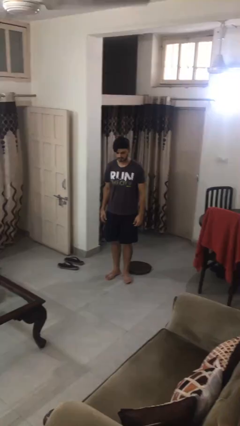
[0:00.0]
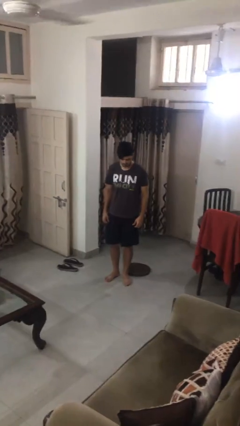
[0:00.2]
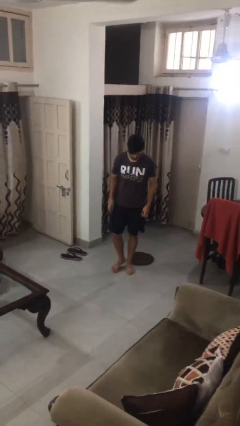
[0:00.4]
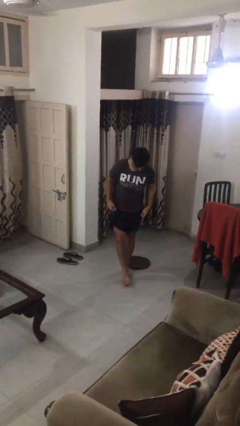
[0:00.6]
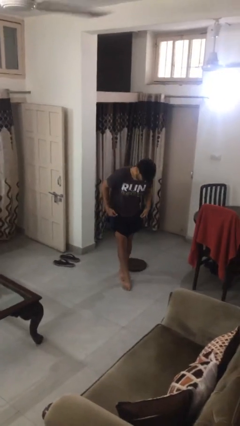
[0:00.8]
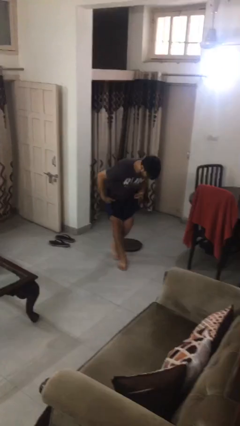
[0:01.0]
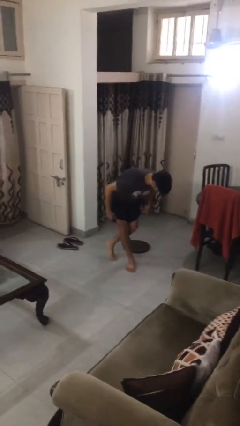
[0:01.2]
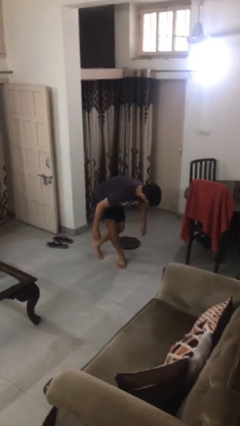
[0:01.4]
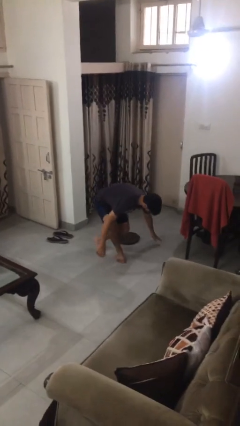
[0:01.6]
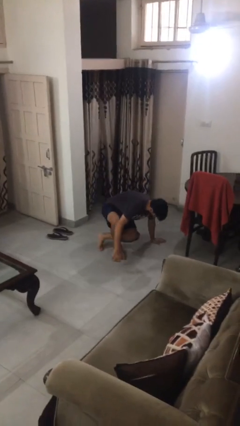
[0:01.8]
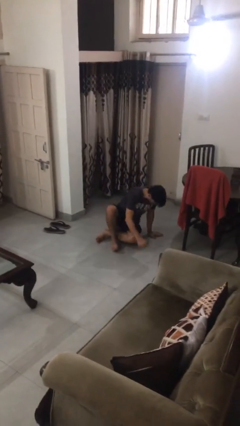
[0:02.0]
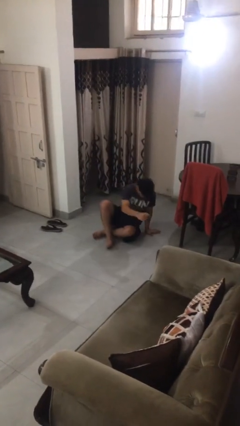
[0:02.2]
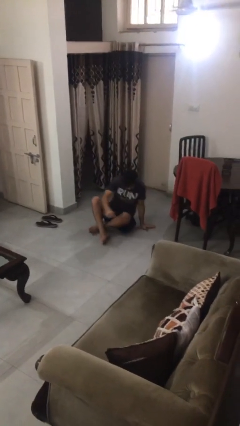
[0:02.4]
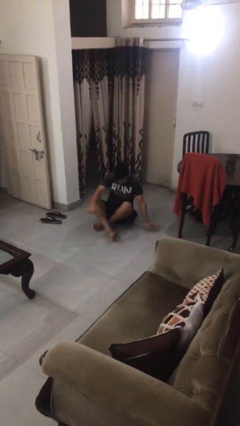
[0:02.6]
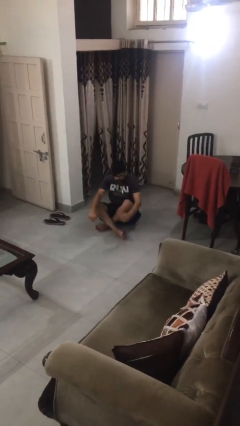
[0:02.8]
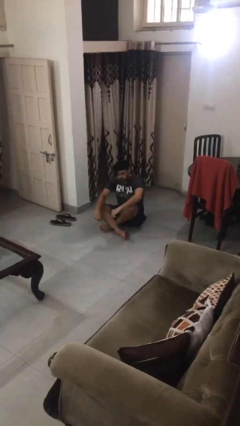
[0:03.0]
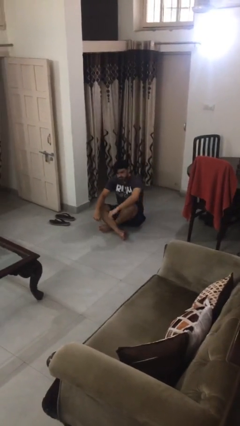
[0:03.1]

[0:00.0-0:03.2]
person sits crisscross

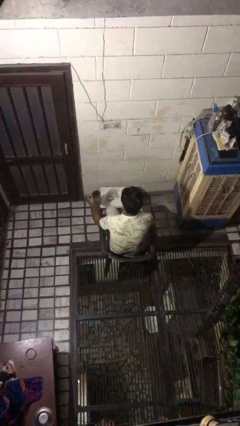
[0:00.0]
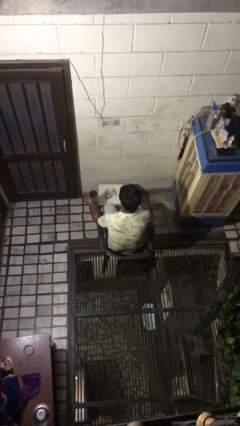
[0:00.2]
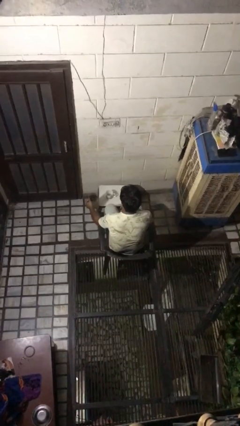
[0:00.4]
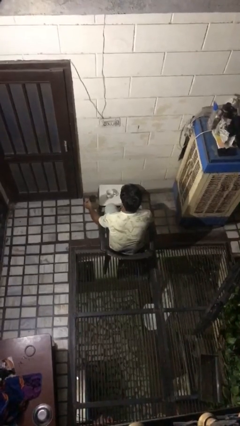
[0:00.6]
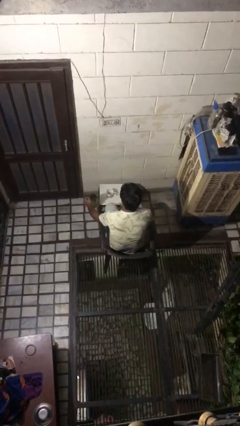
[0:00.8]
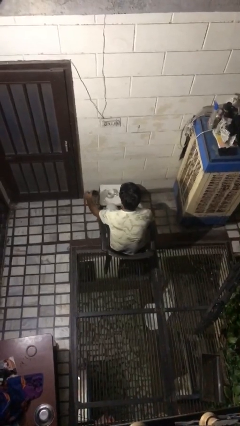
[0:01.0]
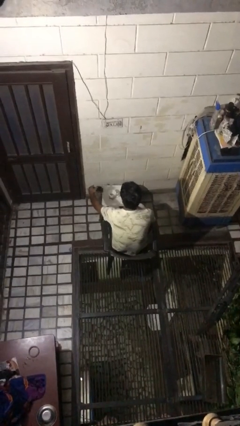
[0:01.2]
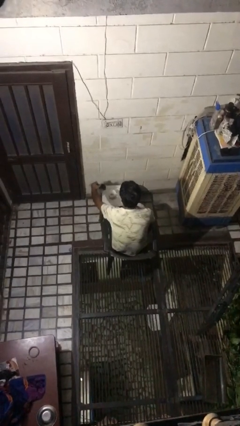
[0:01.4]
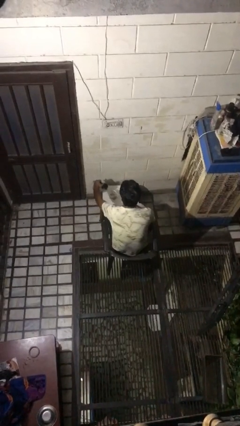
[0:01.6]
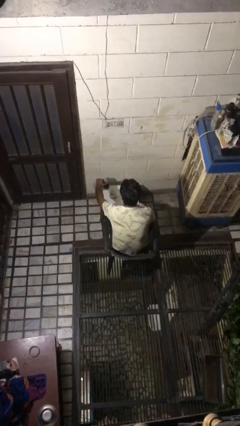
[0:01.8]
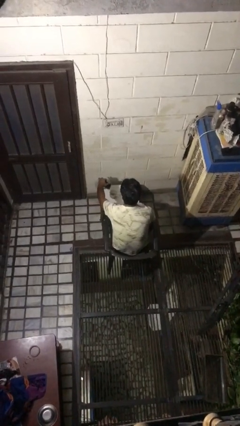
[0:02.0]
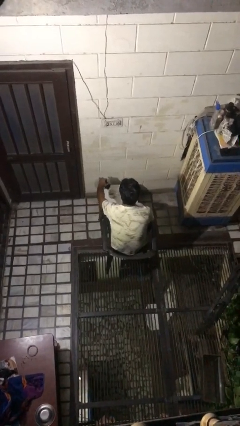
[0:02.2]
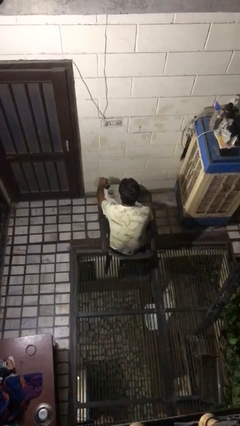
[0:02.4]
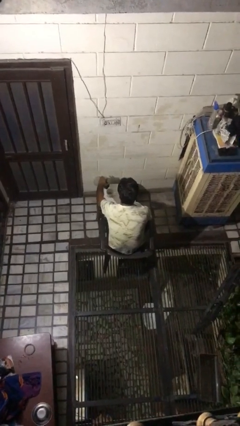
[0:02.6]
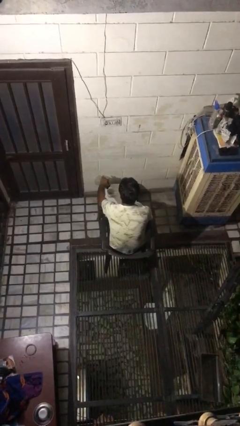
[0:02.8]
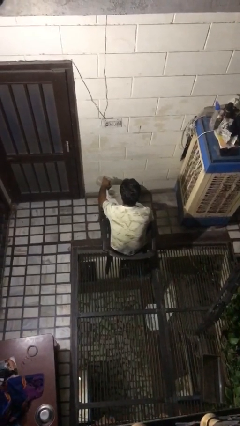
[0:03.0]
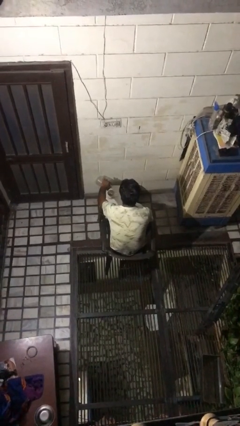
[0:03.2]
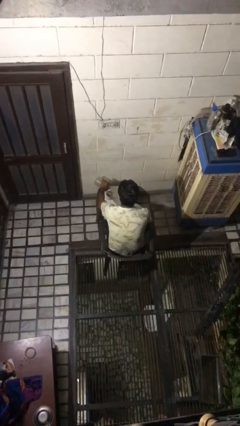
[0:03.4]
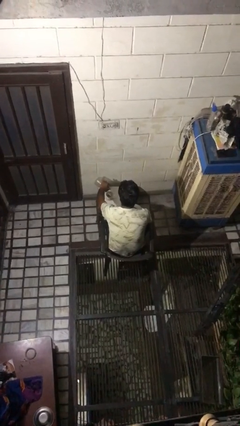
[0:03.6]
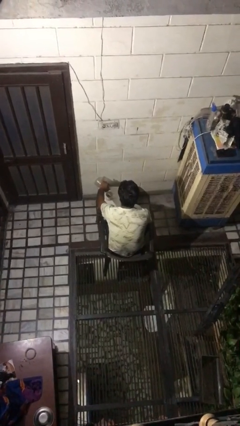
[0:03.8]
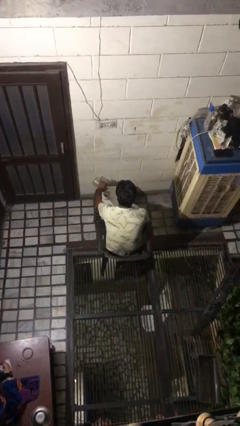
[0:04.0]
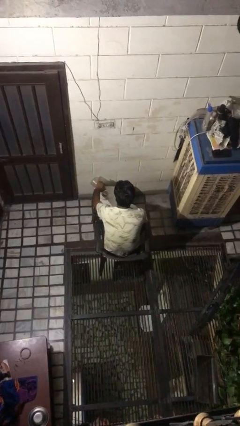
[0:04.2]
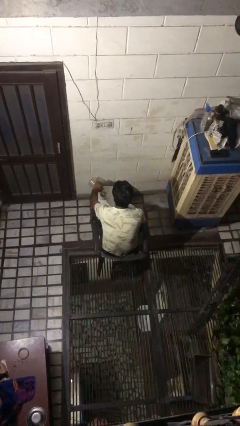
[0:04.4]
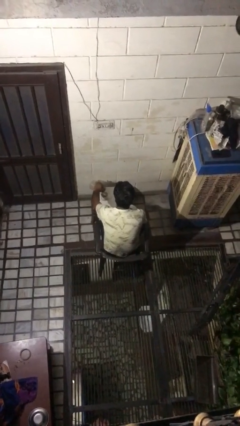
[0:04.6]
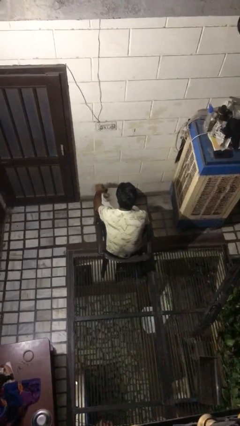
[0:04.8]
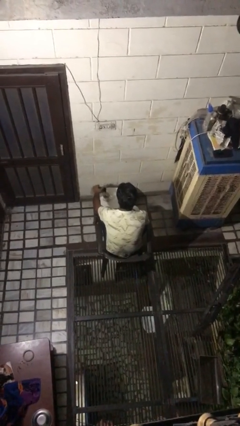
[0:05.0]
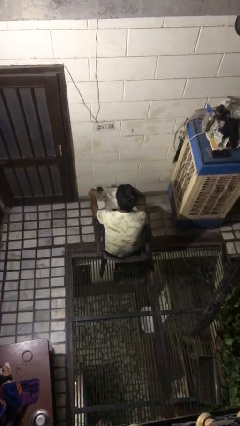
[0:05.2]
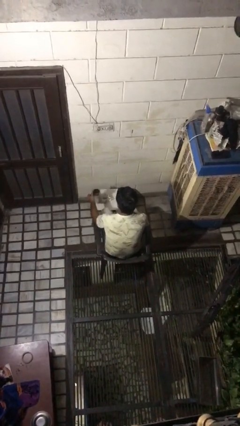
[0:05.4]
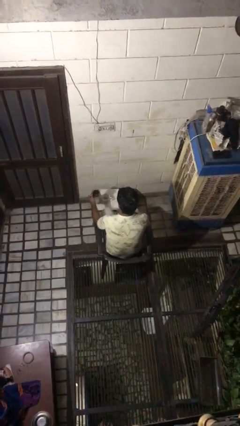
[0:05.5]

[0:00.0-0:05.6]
person pours coffee into mug

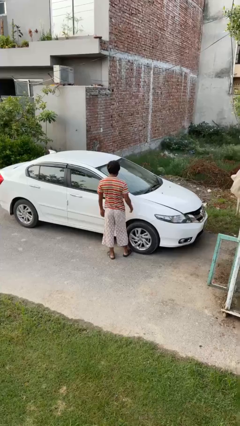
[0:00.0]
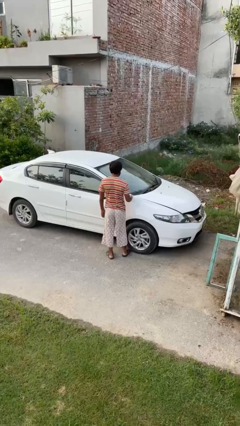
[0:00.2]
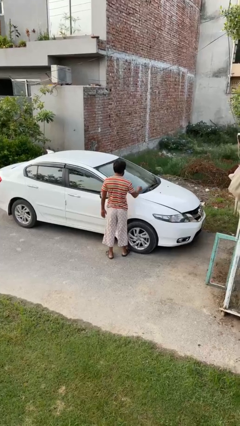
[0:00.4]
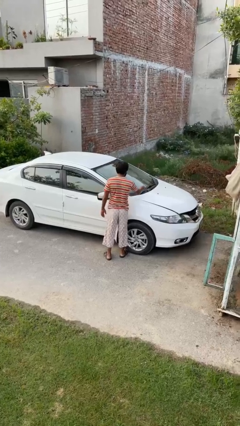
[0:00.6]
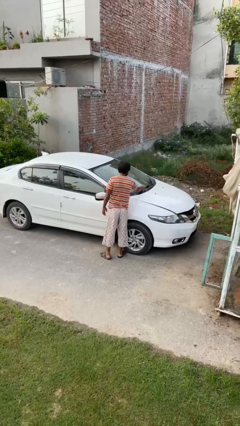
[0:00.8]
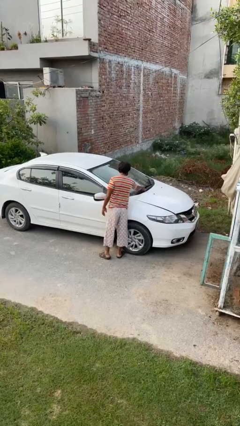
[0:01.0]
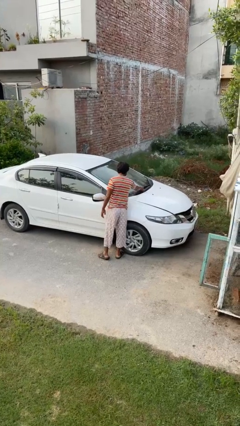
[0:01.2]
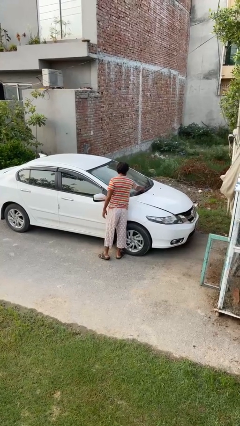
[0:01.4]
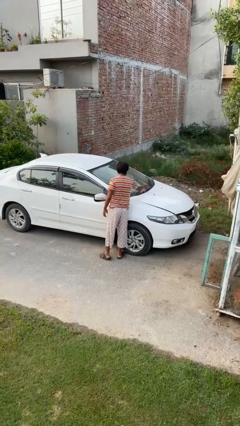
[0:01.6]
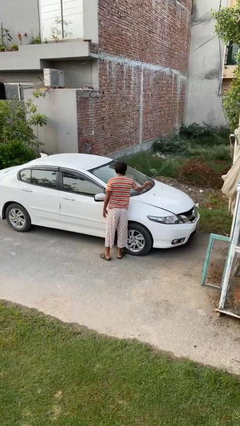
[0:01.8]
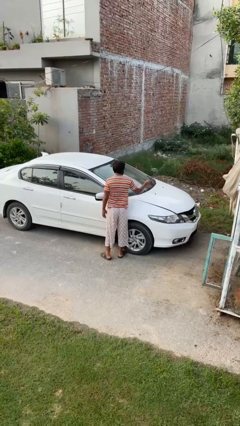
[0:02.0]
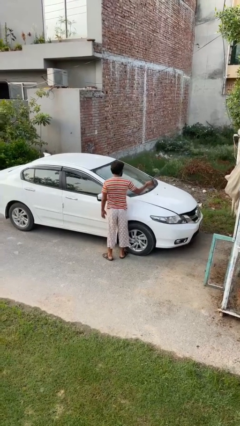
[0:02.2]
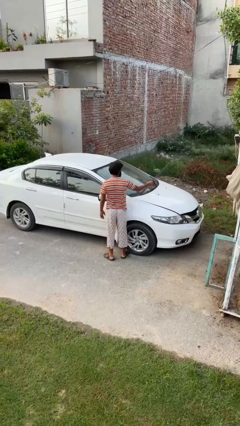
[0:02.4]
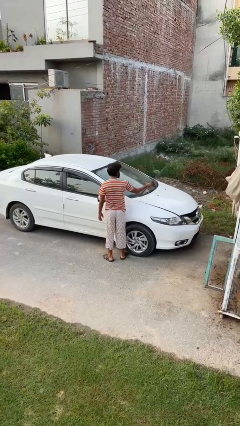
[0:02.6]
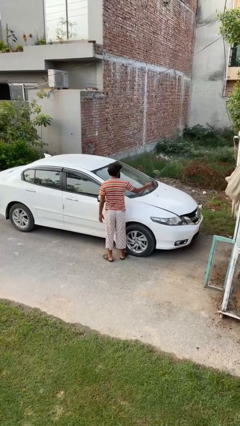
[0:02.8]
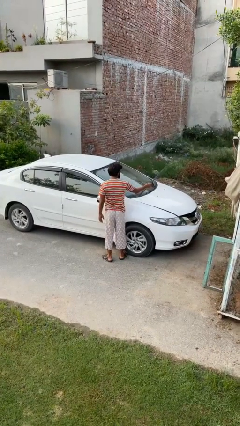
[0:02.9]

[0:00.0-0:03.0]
person flips up car wipers

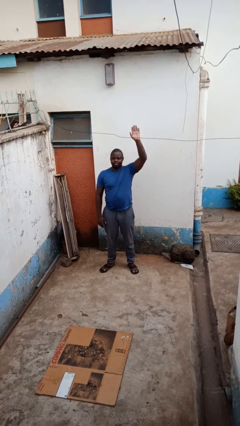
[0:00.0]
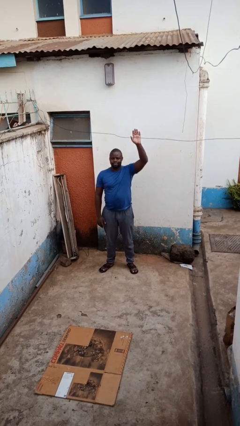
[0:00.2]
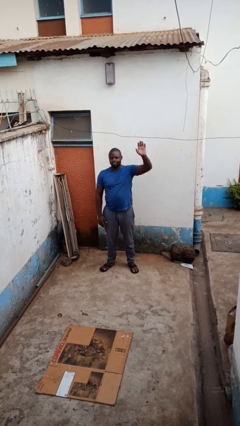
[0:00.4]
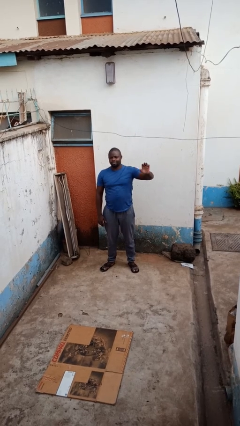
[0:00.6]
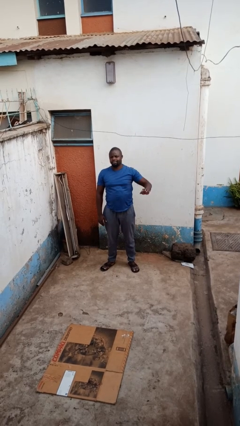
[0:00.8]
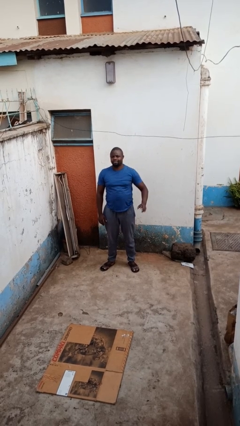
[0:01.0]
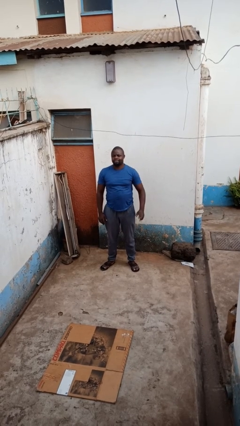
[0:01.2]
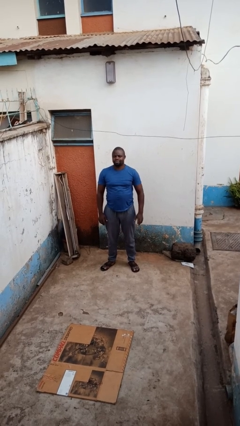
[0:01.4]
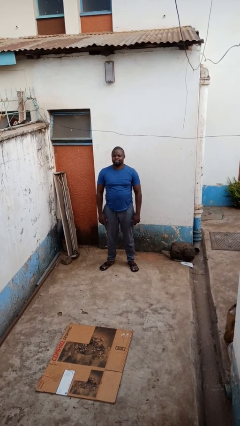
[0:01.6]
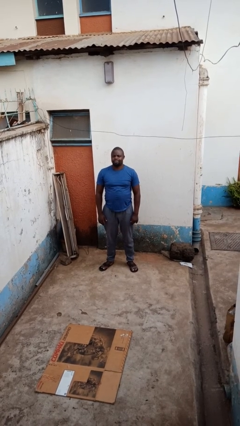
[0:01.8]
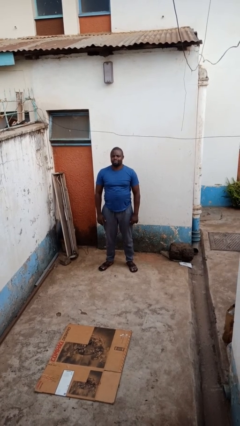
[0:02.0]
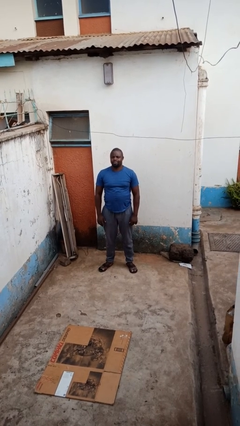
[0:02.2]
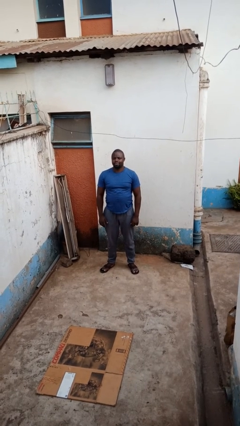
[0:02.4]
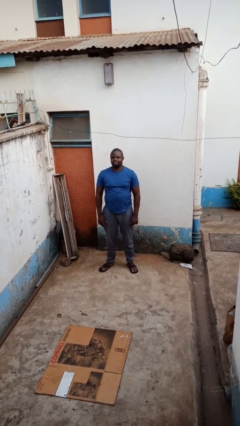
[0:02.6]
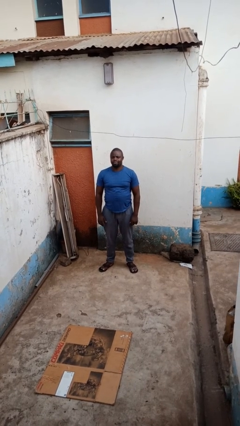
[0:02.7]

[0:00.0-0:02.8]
person gestures lower hand

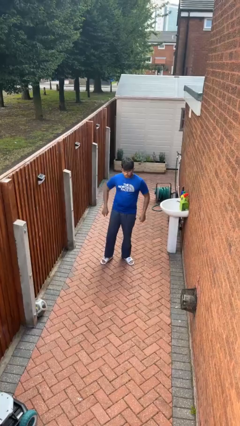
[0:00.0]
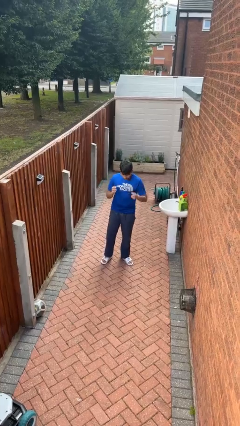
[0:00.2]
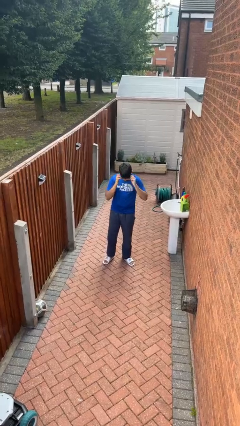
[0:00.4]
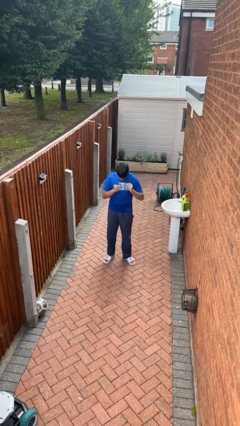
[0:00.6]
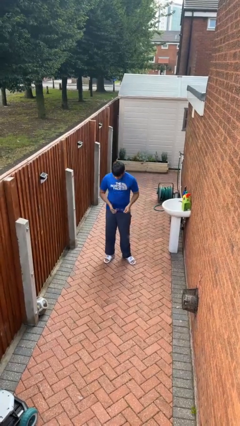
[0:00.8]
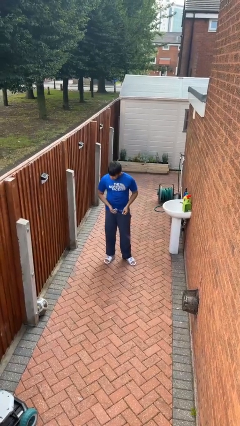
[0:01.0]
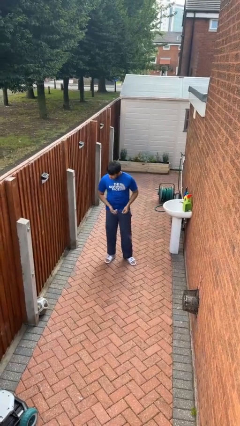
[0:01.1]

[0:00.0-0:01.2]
person takes off glasses

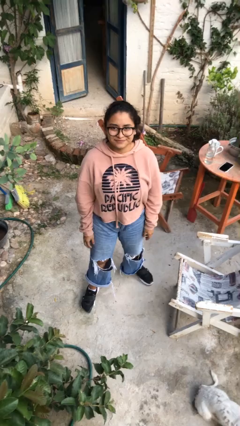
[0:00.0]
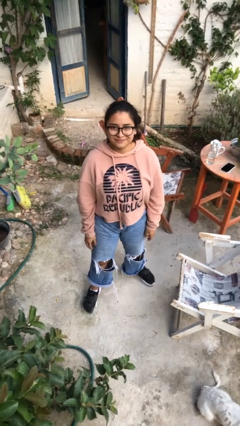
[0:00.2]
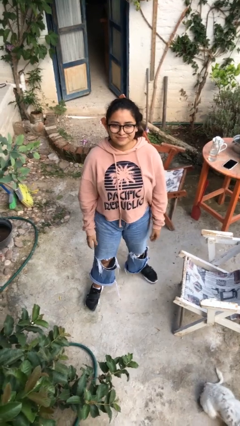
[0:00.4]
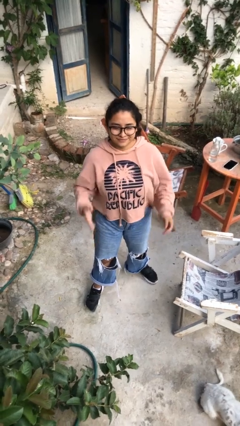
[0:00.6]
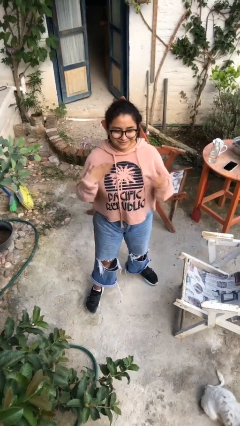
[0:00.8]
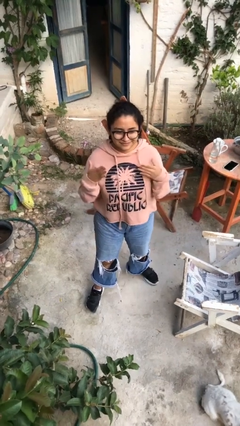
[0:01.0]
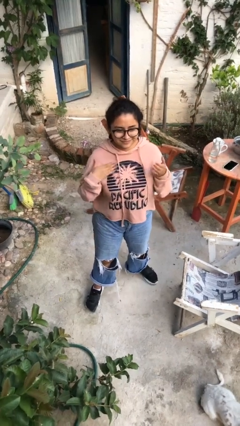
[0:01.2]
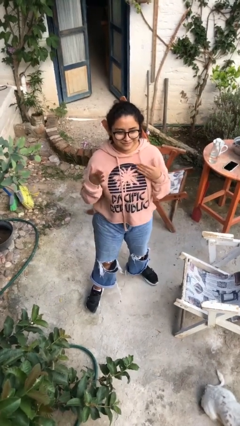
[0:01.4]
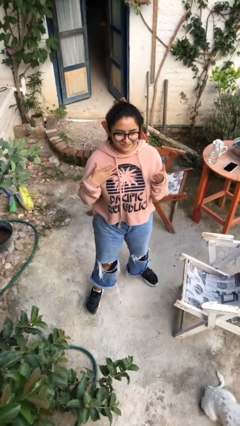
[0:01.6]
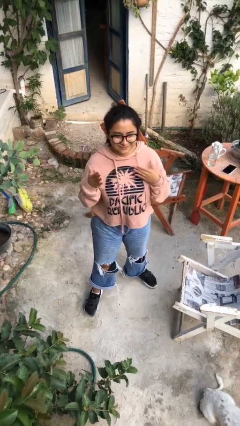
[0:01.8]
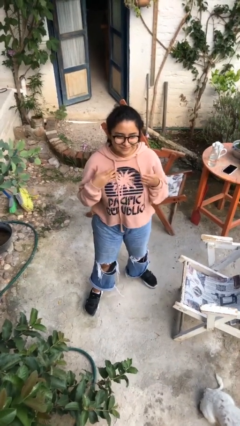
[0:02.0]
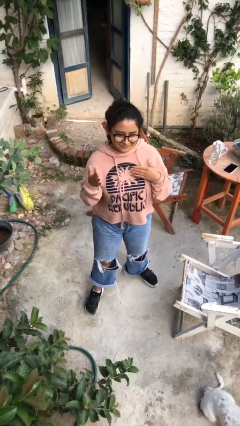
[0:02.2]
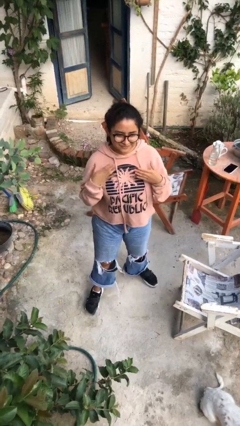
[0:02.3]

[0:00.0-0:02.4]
person drums on chest
